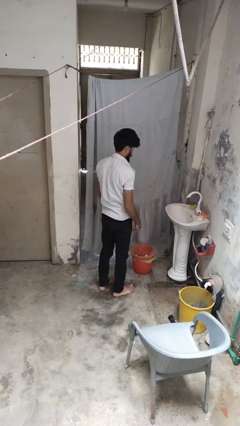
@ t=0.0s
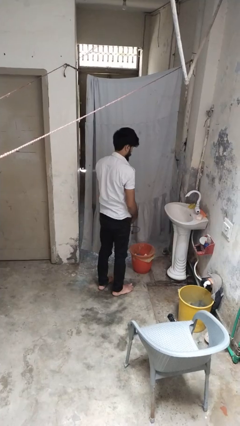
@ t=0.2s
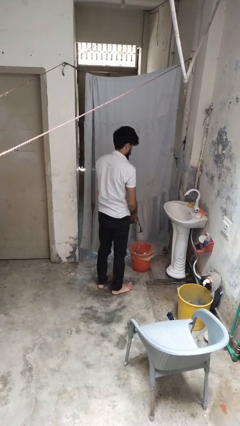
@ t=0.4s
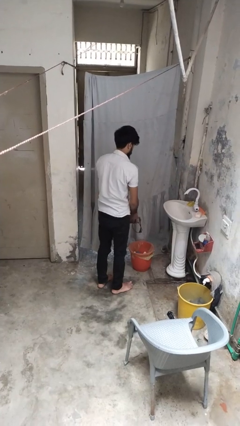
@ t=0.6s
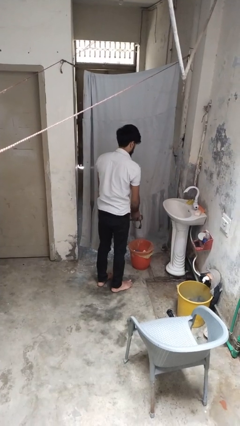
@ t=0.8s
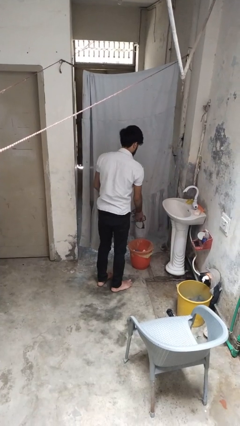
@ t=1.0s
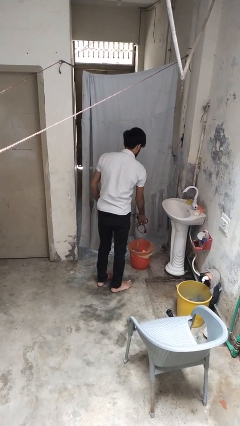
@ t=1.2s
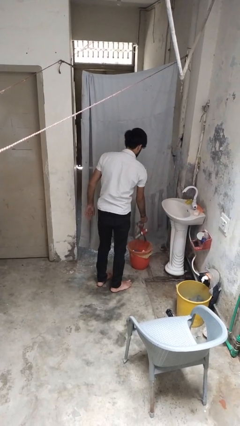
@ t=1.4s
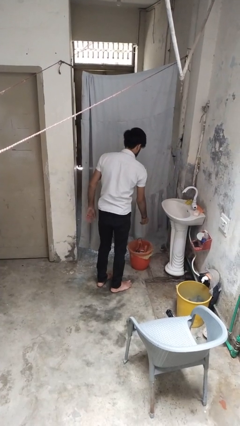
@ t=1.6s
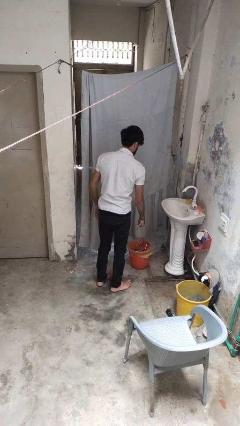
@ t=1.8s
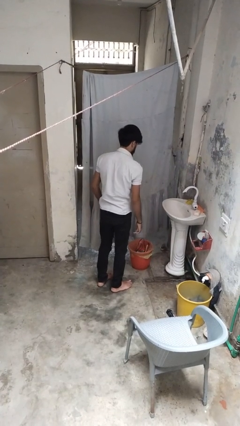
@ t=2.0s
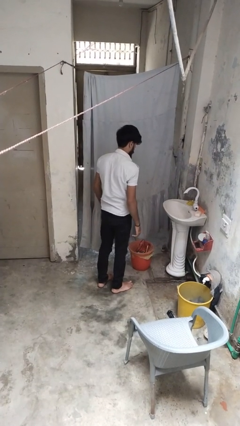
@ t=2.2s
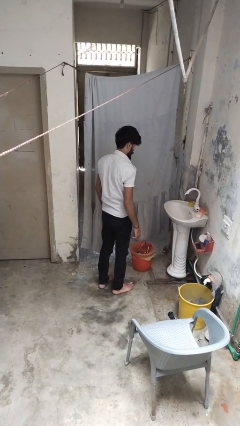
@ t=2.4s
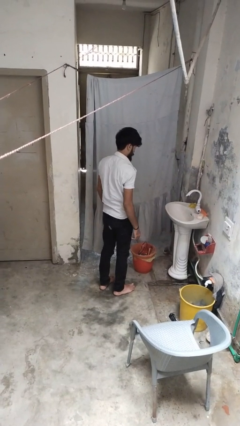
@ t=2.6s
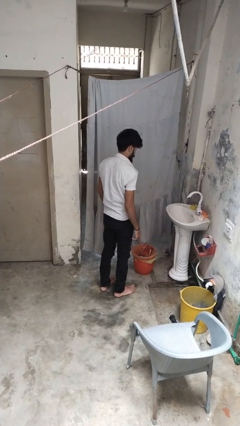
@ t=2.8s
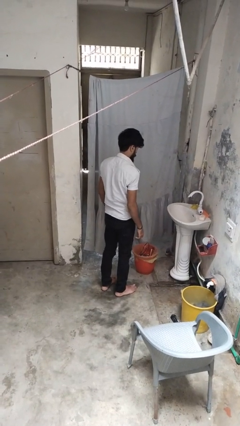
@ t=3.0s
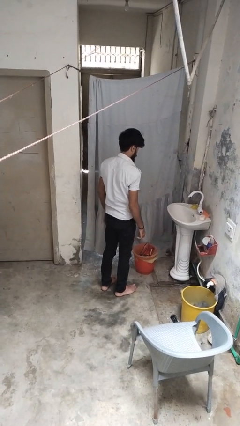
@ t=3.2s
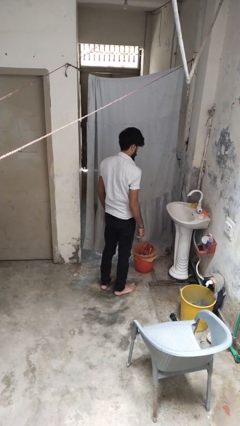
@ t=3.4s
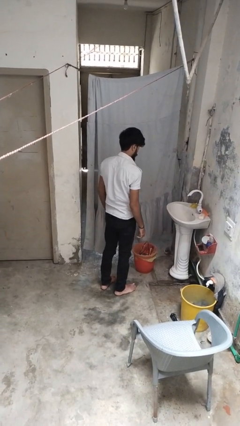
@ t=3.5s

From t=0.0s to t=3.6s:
person discards trash

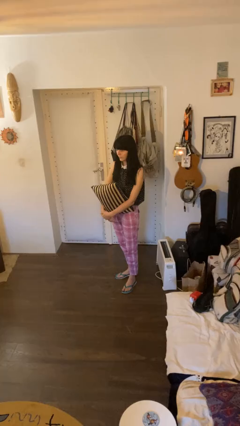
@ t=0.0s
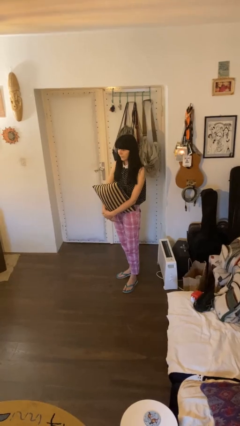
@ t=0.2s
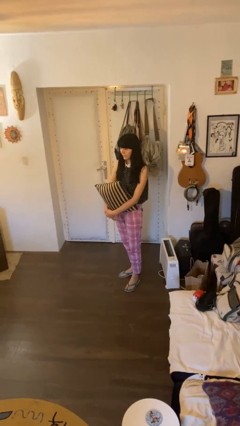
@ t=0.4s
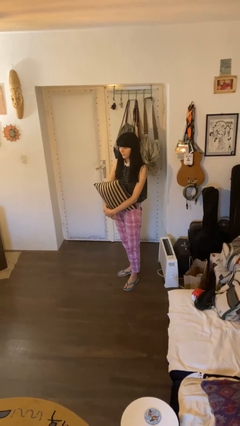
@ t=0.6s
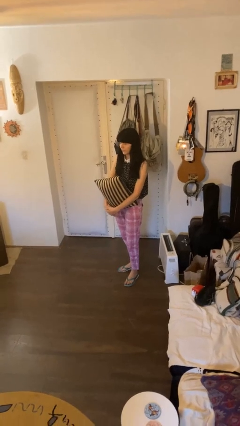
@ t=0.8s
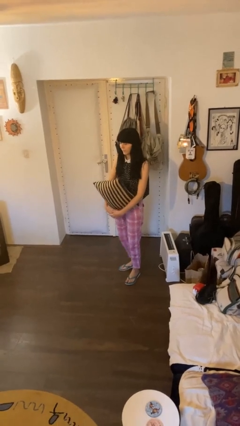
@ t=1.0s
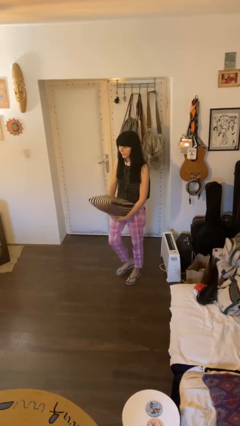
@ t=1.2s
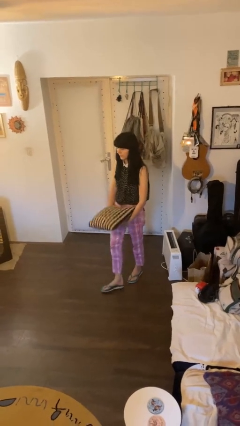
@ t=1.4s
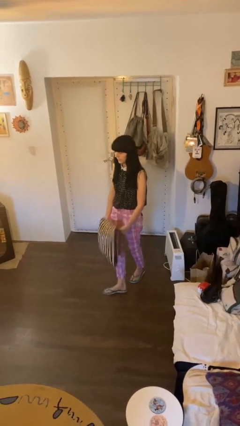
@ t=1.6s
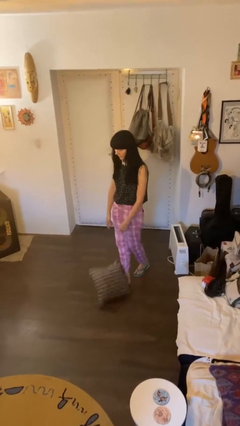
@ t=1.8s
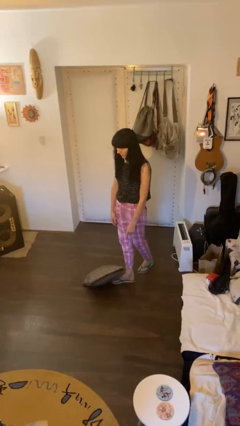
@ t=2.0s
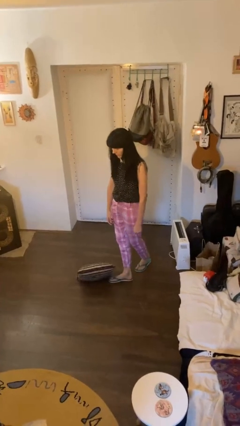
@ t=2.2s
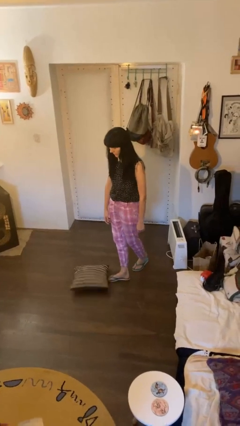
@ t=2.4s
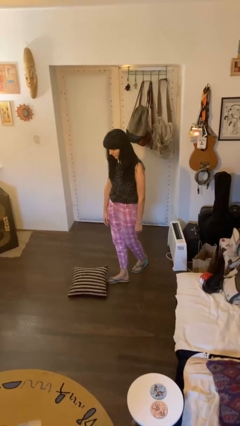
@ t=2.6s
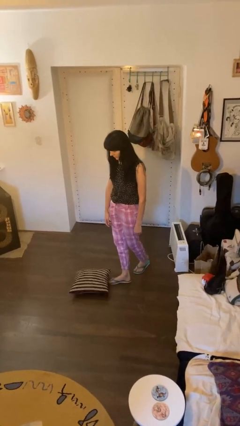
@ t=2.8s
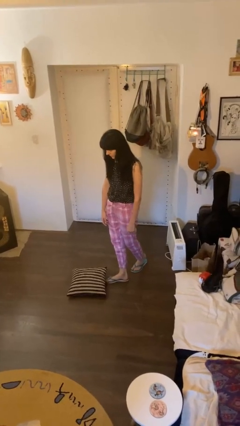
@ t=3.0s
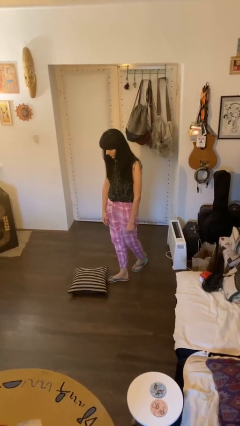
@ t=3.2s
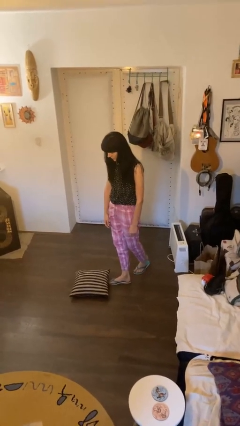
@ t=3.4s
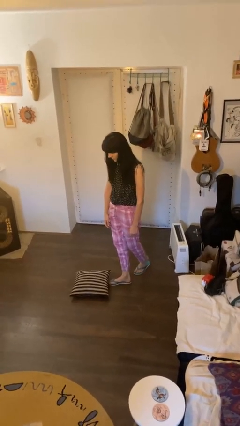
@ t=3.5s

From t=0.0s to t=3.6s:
person drops object

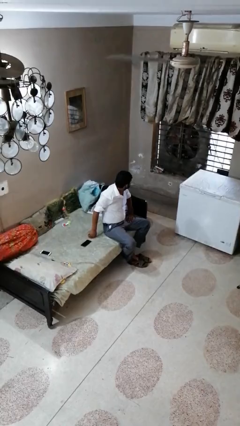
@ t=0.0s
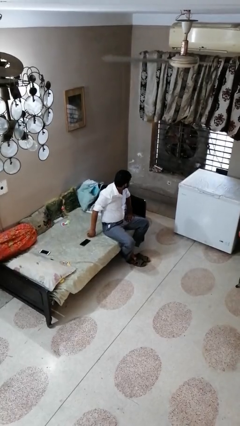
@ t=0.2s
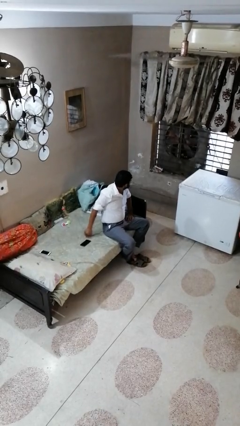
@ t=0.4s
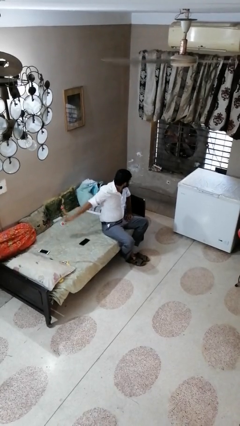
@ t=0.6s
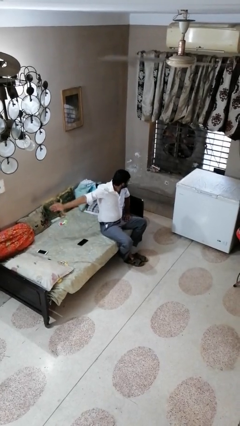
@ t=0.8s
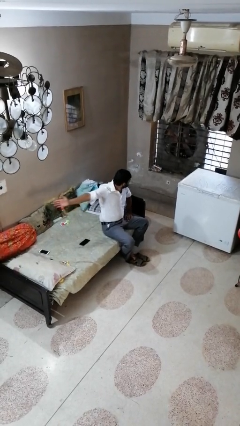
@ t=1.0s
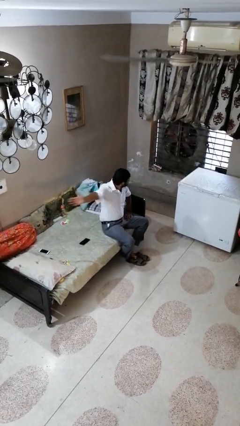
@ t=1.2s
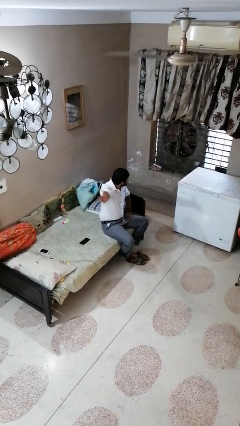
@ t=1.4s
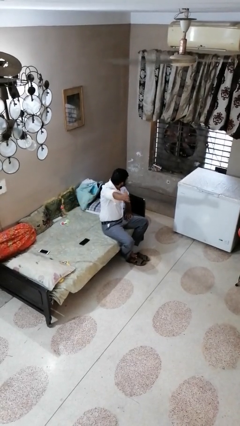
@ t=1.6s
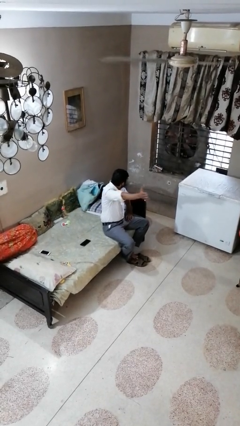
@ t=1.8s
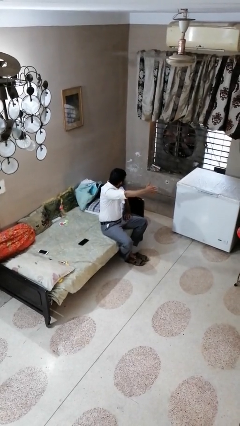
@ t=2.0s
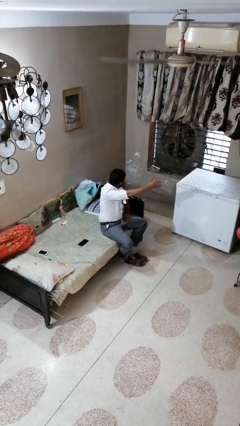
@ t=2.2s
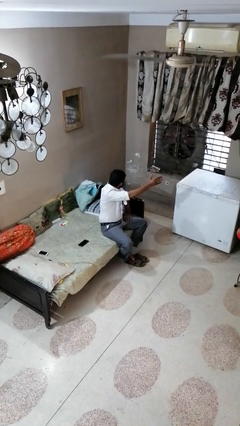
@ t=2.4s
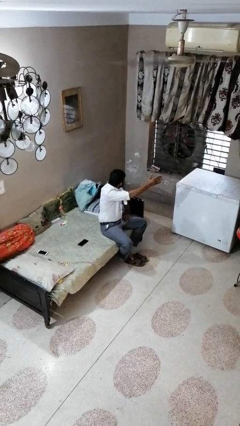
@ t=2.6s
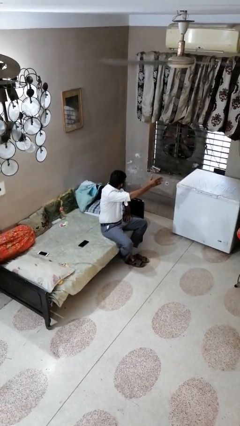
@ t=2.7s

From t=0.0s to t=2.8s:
person gestures swipe left

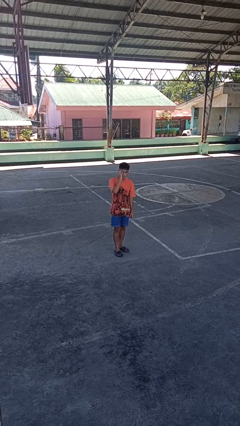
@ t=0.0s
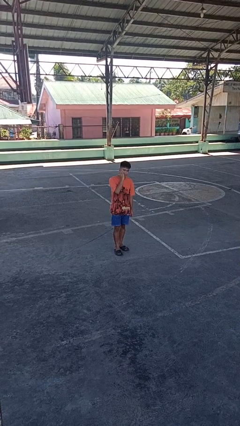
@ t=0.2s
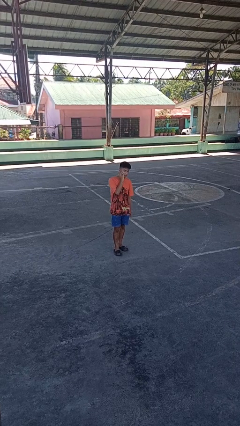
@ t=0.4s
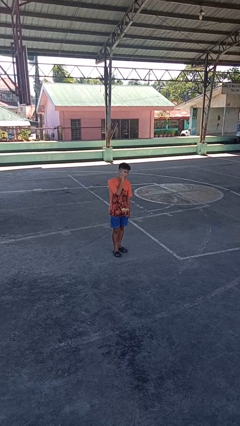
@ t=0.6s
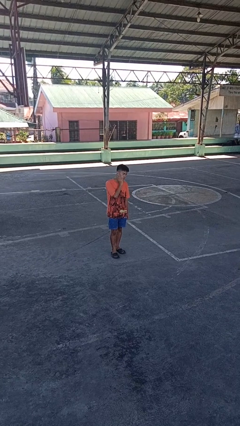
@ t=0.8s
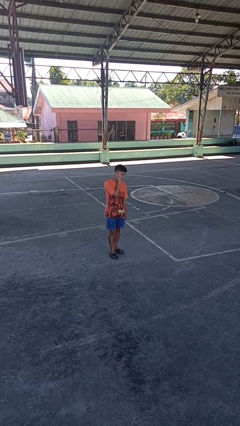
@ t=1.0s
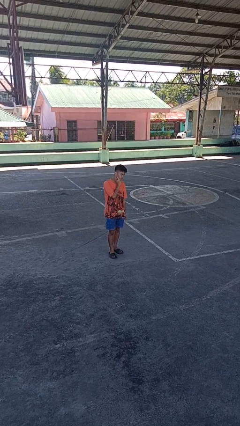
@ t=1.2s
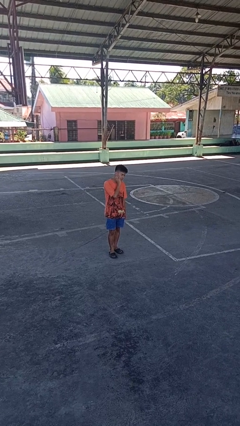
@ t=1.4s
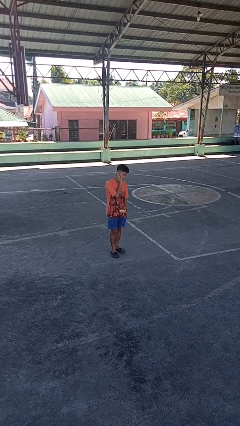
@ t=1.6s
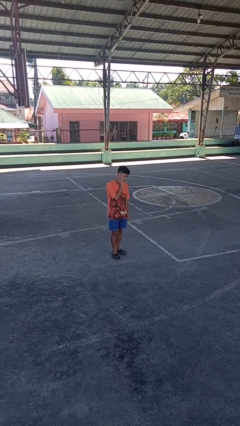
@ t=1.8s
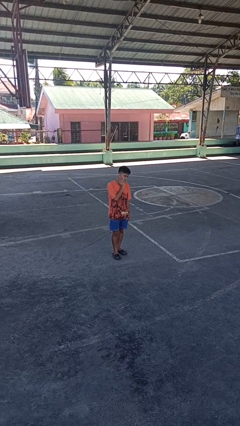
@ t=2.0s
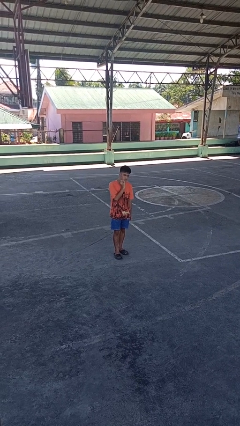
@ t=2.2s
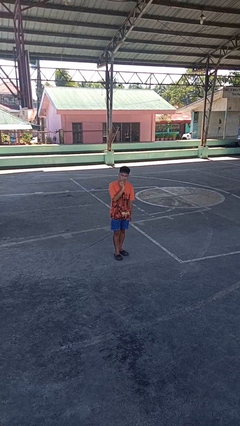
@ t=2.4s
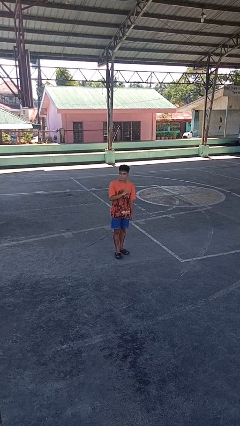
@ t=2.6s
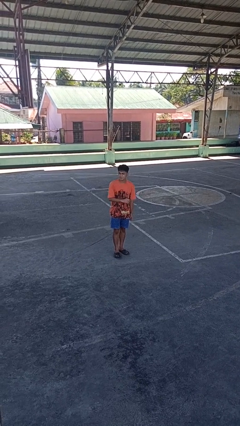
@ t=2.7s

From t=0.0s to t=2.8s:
person scratches face

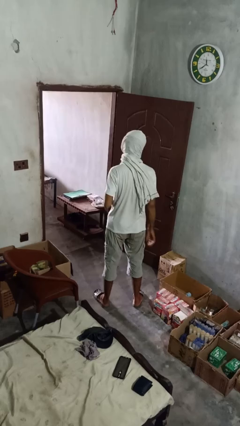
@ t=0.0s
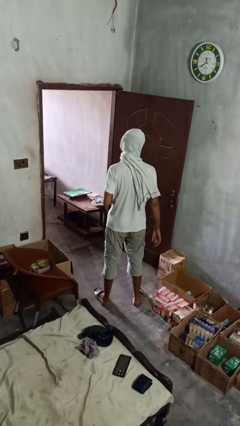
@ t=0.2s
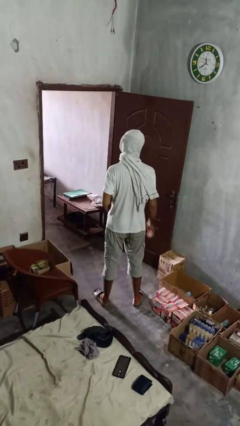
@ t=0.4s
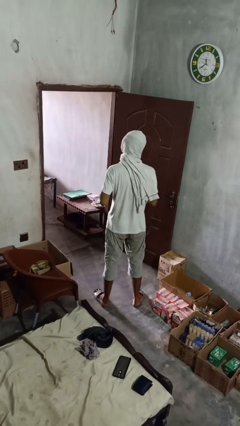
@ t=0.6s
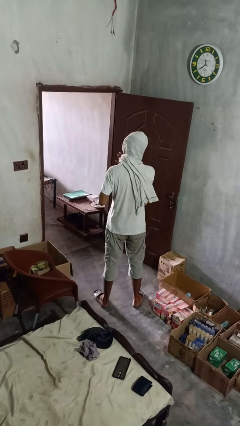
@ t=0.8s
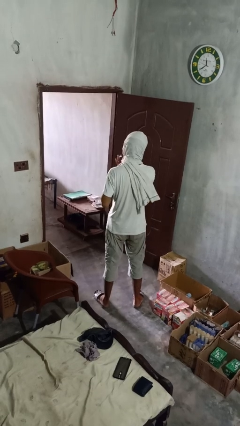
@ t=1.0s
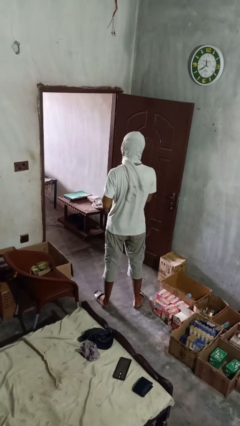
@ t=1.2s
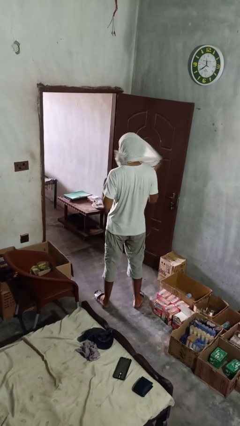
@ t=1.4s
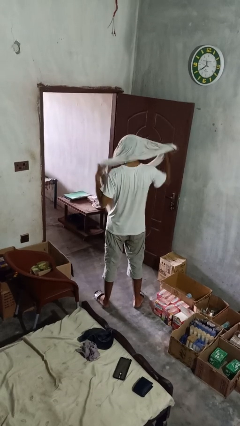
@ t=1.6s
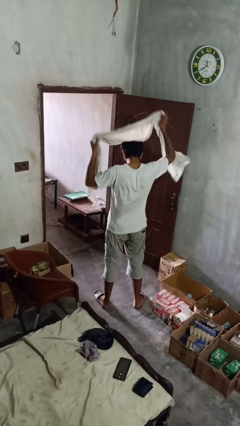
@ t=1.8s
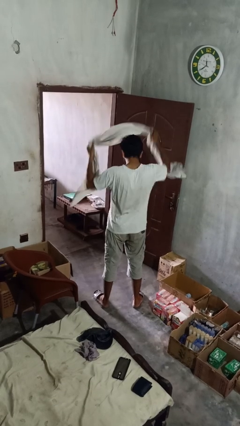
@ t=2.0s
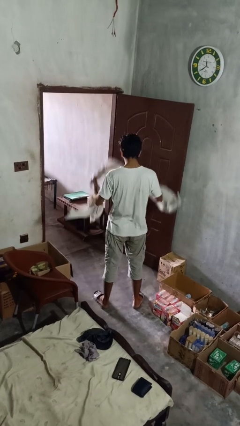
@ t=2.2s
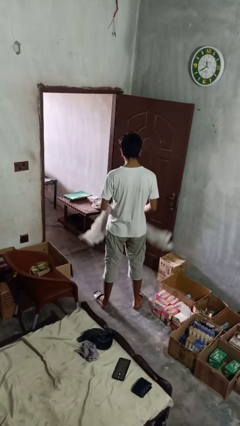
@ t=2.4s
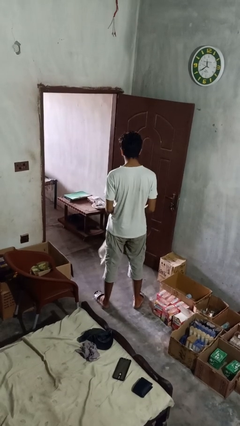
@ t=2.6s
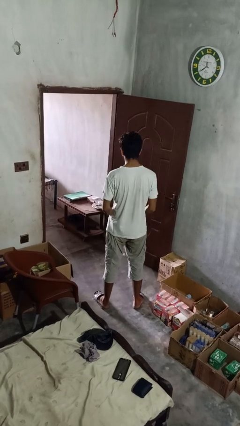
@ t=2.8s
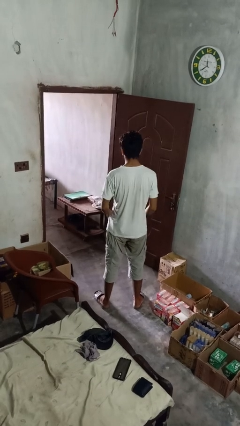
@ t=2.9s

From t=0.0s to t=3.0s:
person takes off scarf

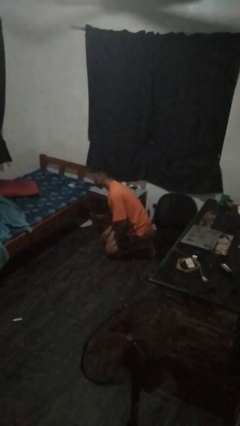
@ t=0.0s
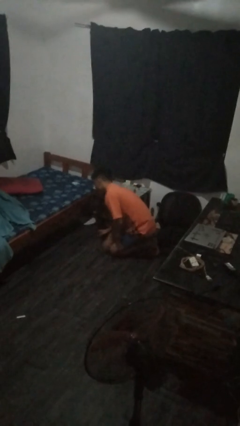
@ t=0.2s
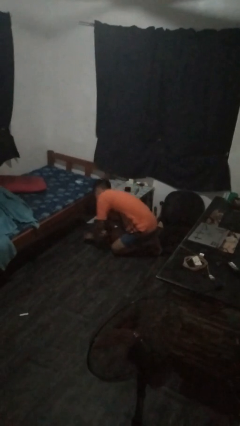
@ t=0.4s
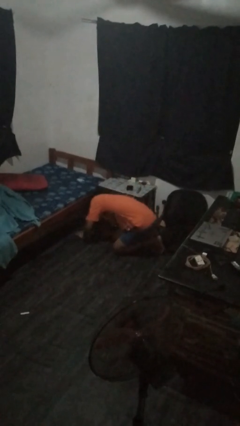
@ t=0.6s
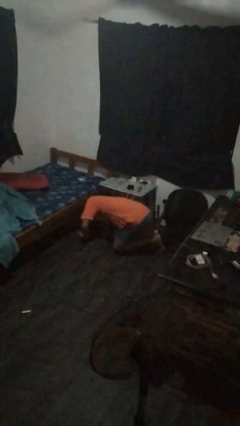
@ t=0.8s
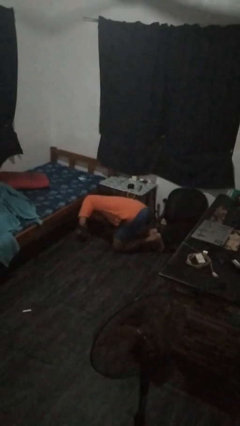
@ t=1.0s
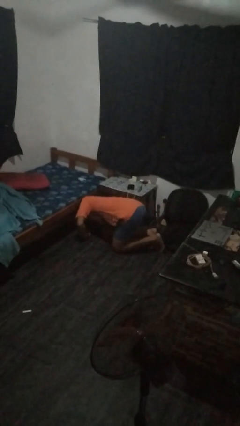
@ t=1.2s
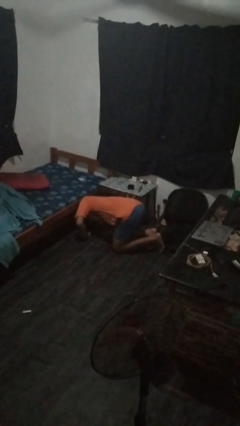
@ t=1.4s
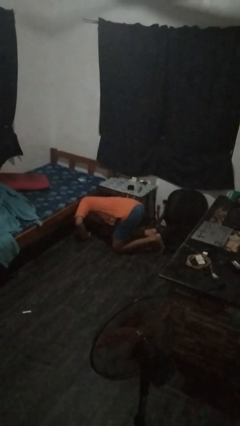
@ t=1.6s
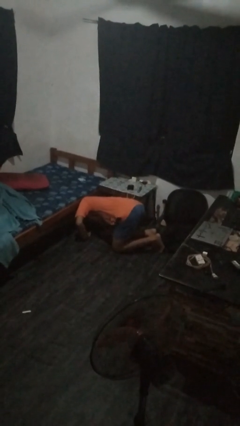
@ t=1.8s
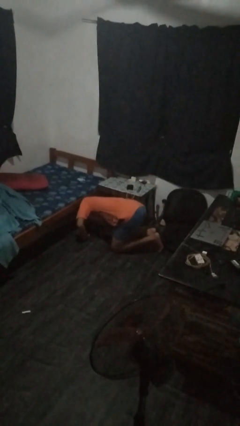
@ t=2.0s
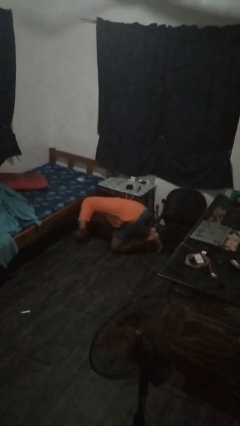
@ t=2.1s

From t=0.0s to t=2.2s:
person searches under bed
